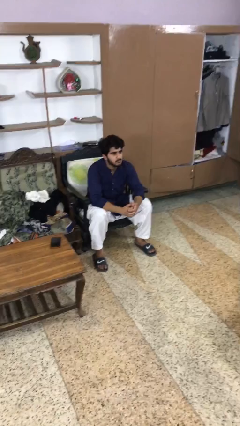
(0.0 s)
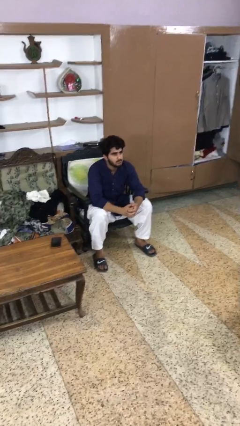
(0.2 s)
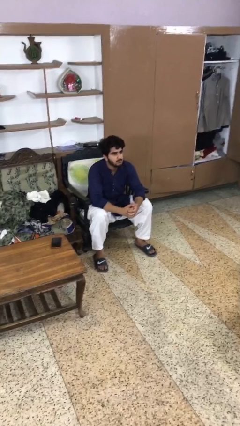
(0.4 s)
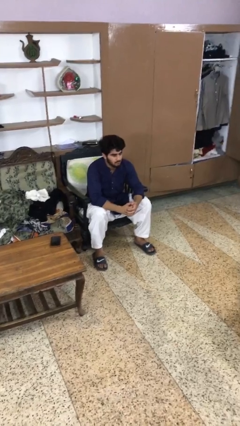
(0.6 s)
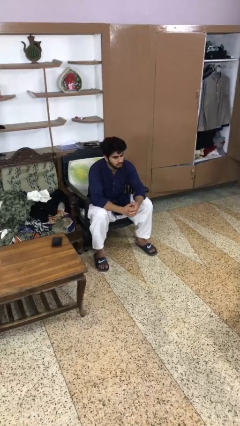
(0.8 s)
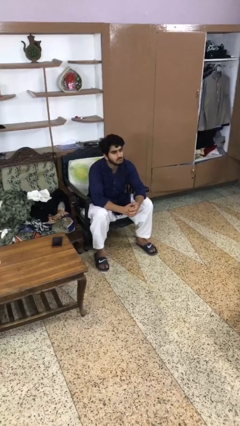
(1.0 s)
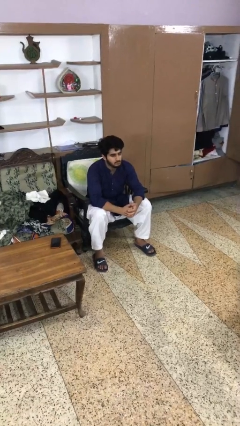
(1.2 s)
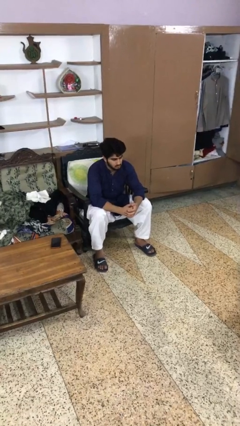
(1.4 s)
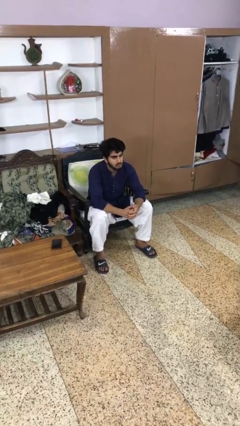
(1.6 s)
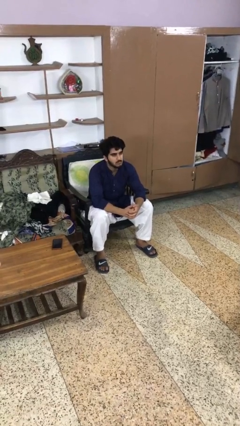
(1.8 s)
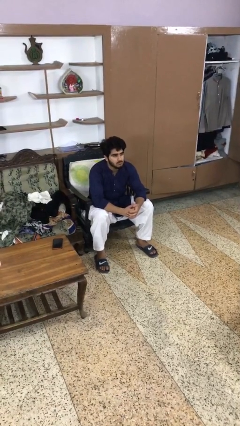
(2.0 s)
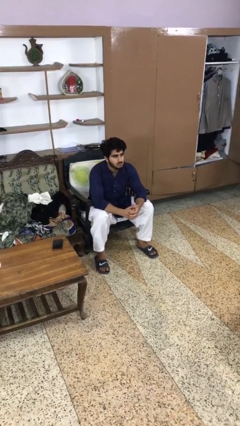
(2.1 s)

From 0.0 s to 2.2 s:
person nods head

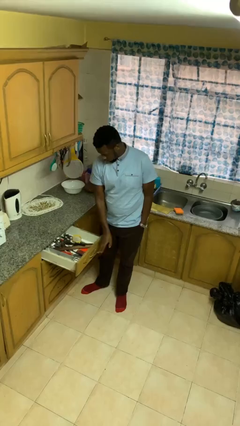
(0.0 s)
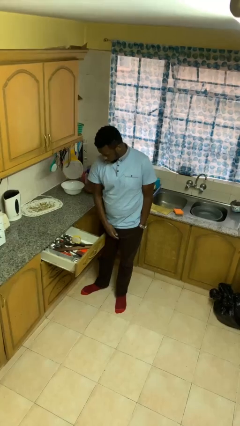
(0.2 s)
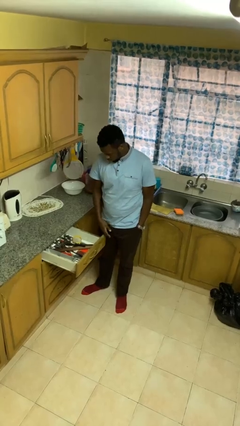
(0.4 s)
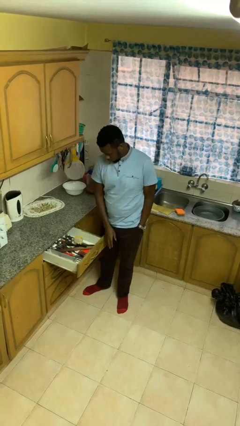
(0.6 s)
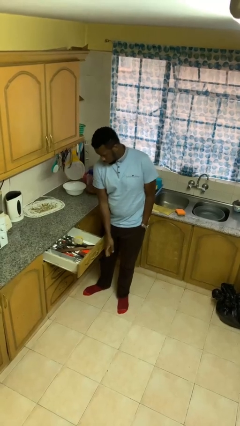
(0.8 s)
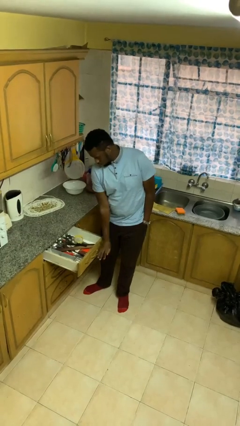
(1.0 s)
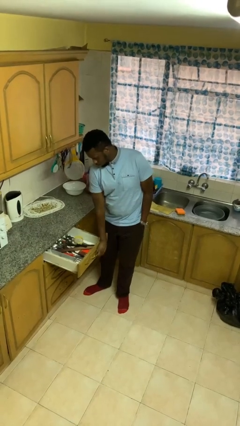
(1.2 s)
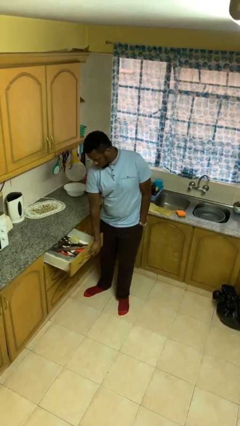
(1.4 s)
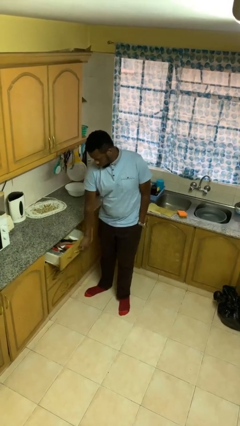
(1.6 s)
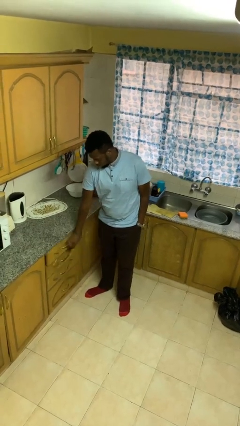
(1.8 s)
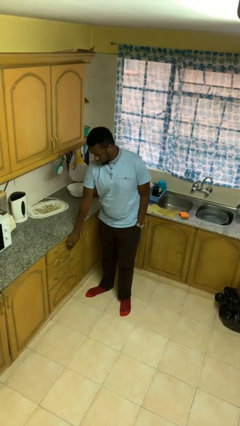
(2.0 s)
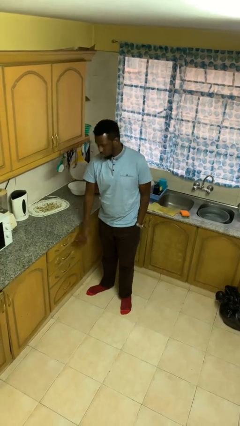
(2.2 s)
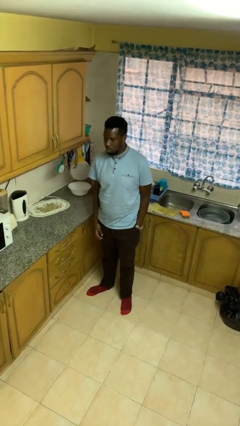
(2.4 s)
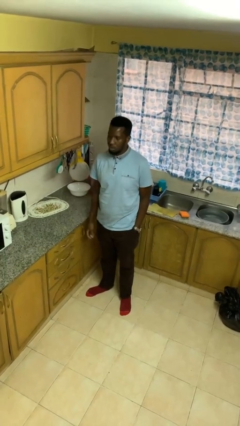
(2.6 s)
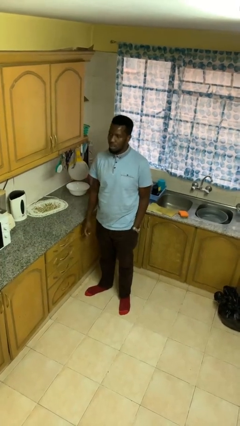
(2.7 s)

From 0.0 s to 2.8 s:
person closes kitchen drawer

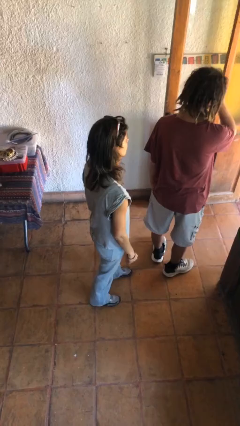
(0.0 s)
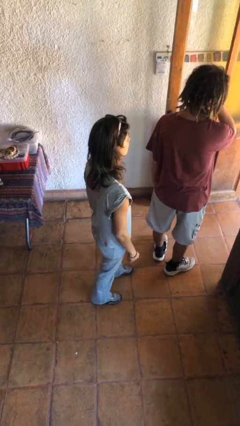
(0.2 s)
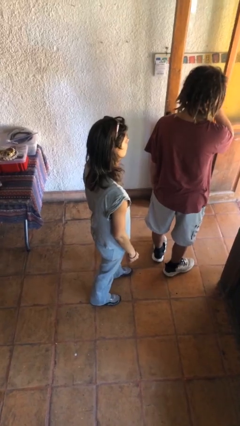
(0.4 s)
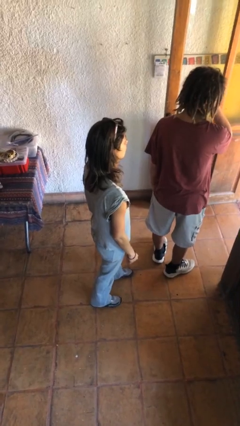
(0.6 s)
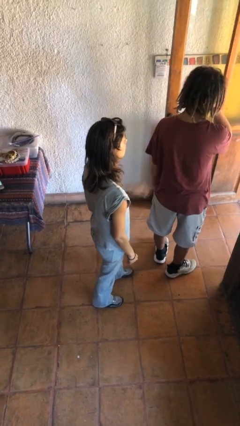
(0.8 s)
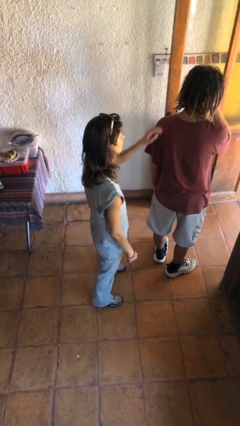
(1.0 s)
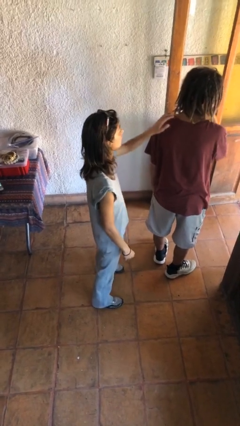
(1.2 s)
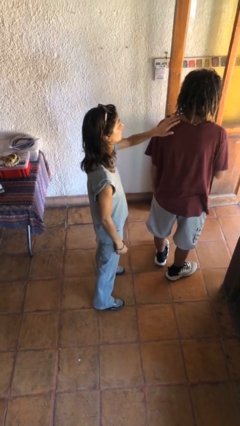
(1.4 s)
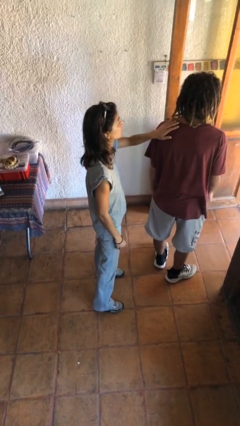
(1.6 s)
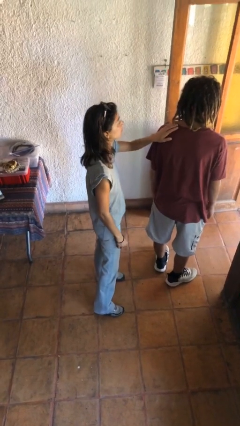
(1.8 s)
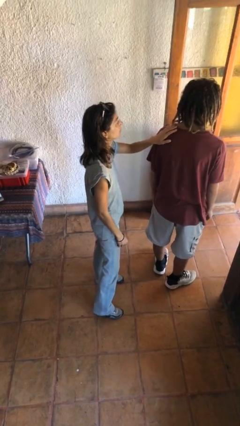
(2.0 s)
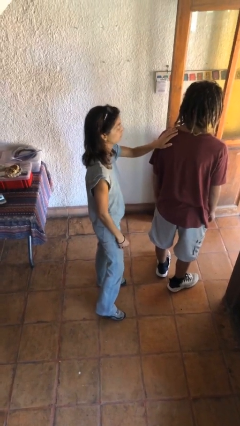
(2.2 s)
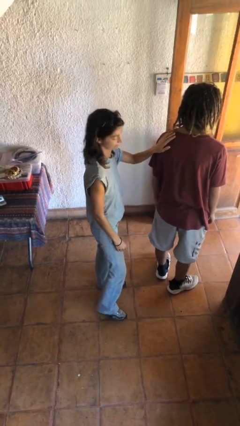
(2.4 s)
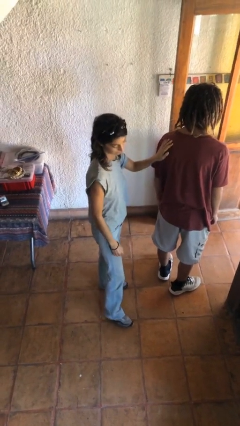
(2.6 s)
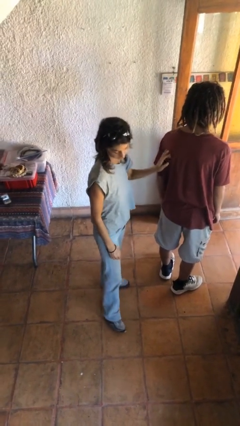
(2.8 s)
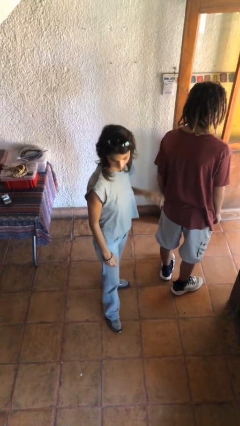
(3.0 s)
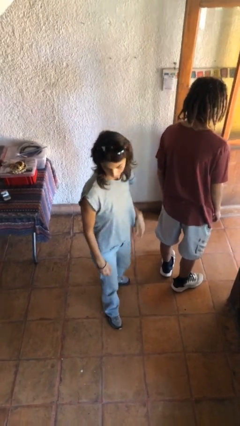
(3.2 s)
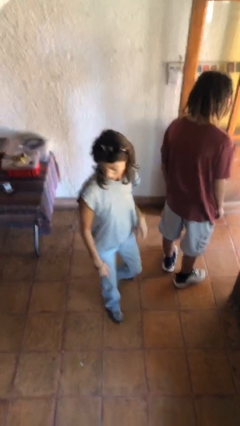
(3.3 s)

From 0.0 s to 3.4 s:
person touches back of person

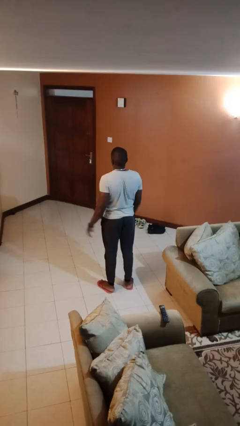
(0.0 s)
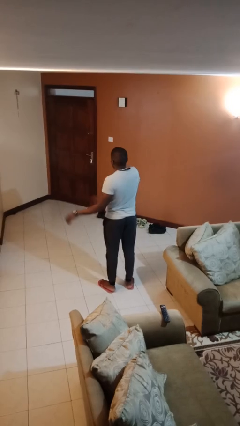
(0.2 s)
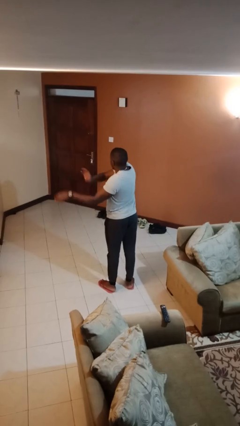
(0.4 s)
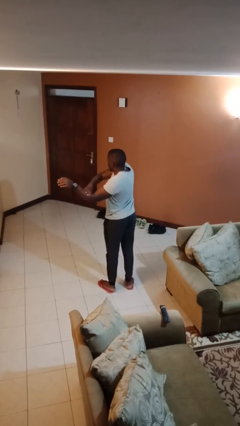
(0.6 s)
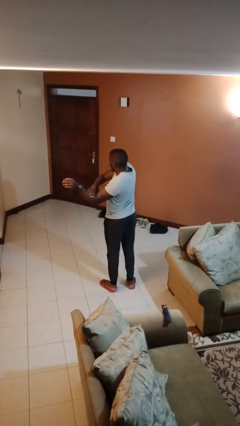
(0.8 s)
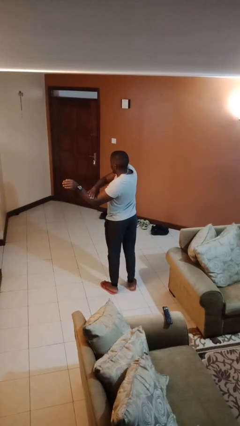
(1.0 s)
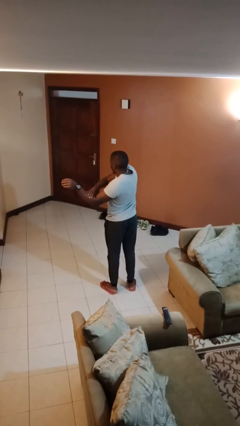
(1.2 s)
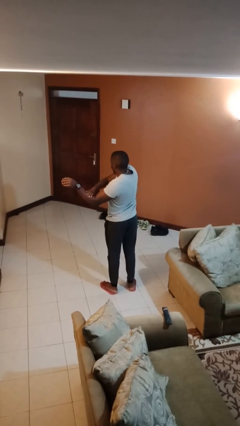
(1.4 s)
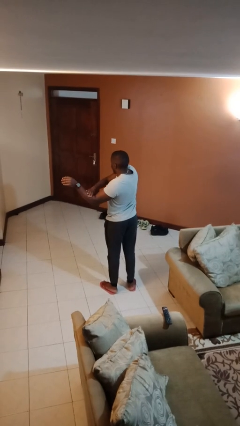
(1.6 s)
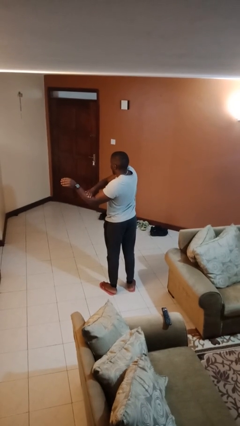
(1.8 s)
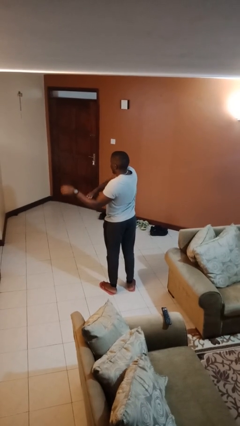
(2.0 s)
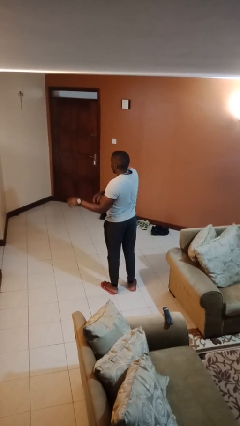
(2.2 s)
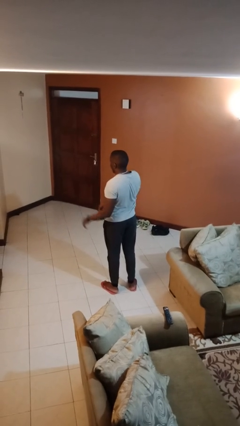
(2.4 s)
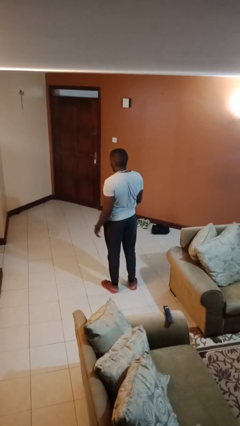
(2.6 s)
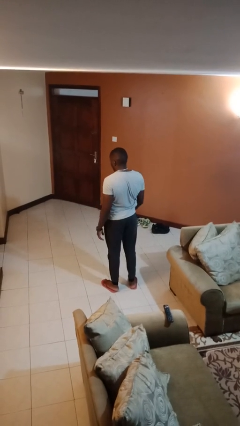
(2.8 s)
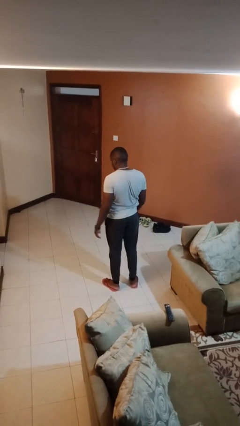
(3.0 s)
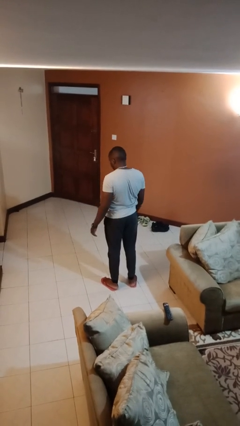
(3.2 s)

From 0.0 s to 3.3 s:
person swats bug

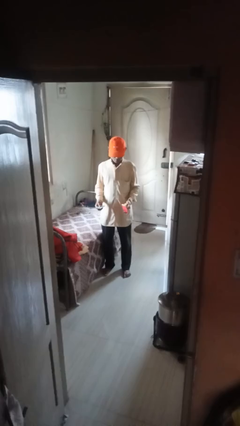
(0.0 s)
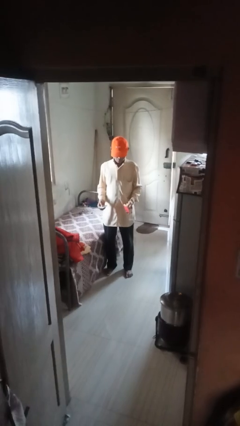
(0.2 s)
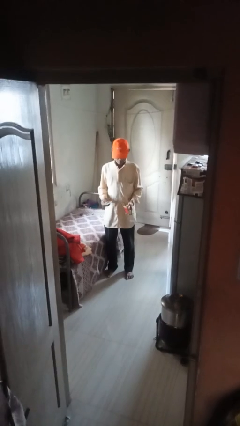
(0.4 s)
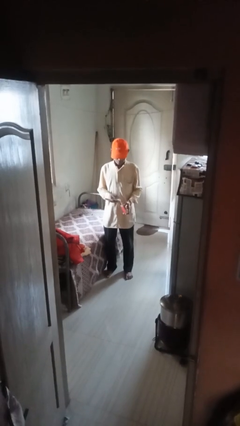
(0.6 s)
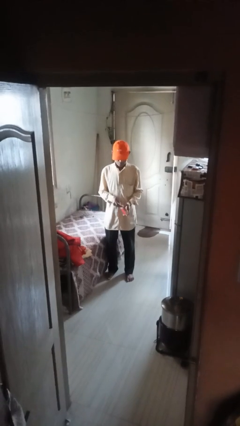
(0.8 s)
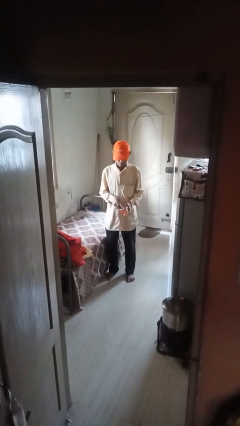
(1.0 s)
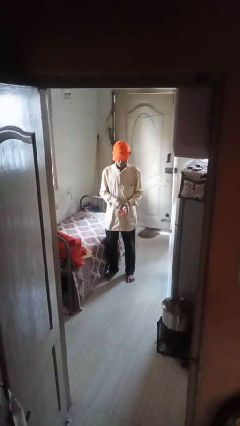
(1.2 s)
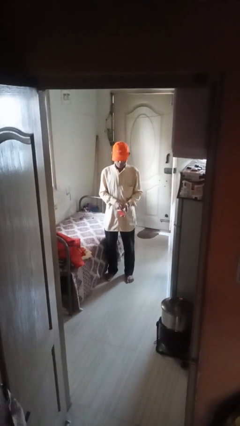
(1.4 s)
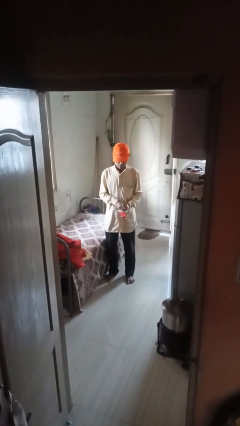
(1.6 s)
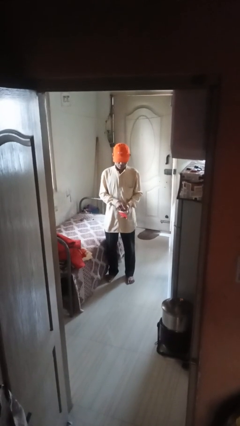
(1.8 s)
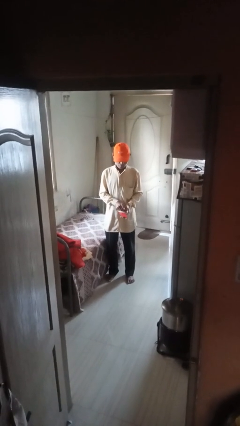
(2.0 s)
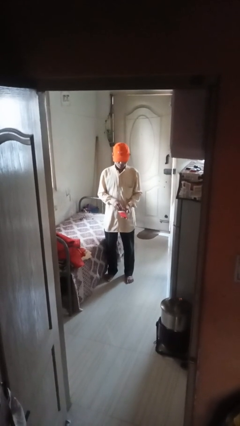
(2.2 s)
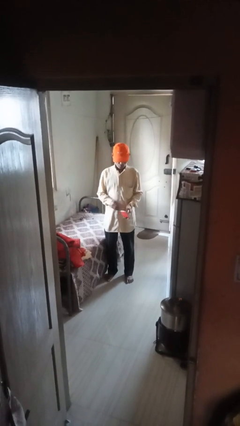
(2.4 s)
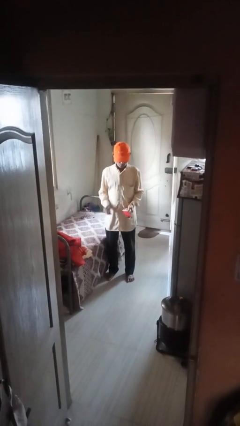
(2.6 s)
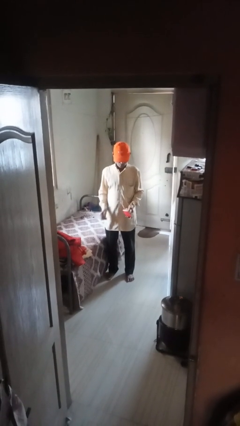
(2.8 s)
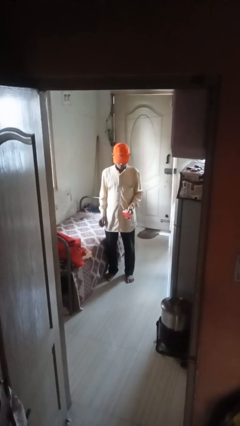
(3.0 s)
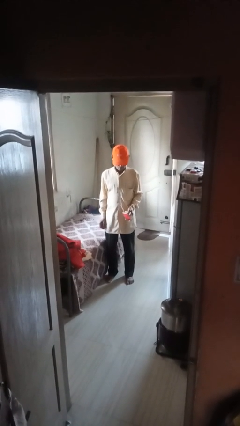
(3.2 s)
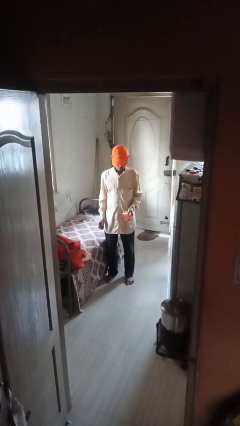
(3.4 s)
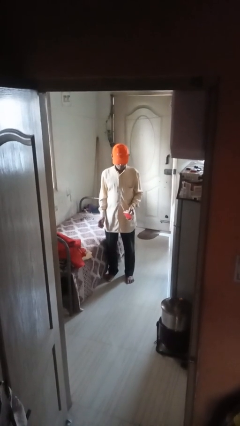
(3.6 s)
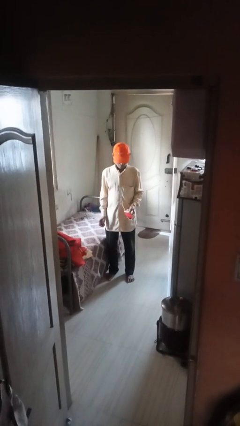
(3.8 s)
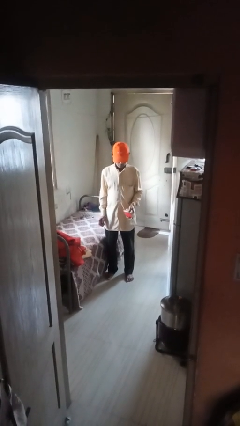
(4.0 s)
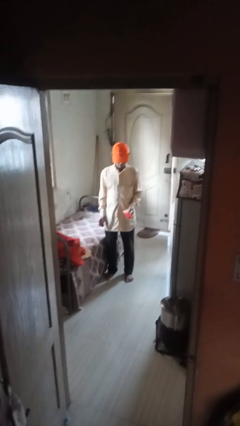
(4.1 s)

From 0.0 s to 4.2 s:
person puts object into purse

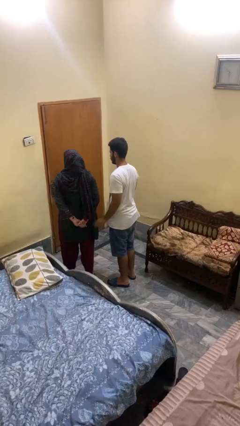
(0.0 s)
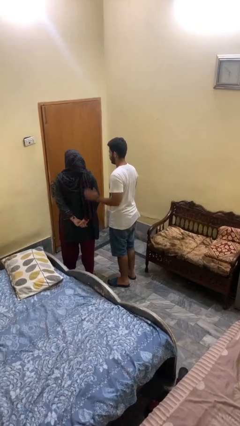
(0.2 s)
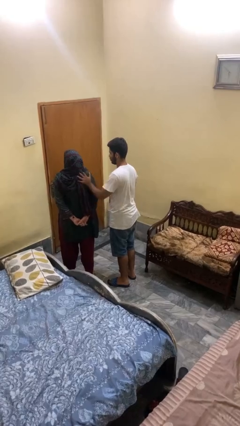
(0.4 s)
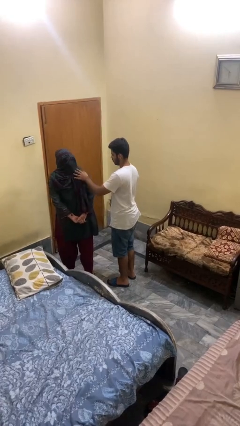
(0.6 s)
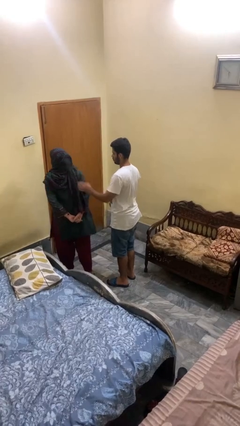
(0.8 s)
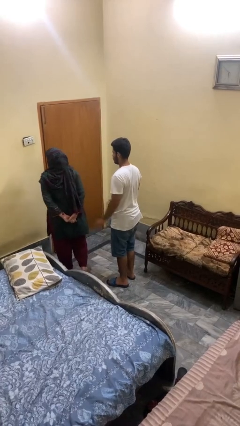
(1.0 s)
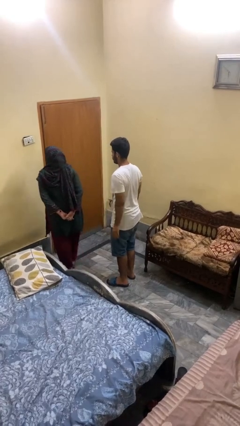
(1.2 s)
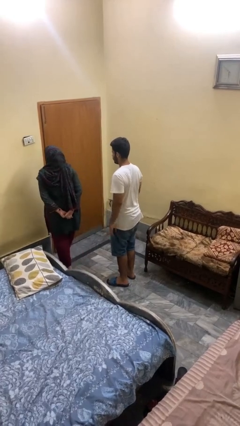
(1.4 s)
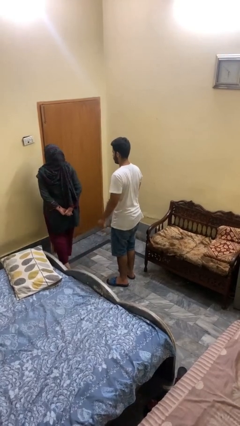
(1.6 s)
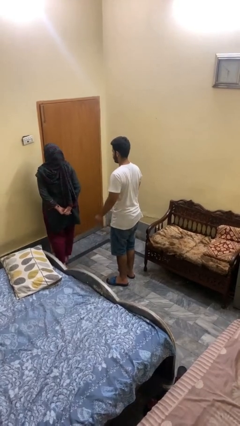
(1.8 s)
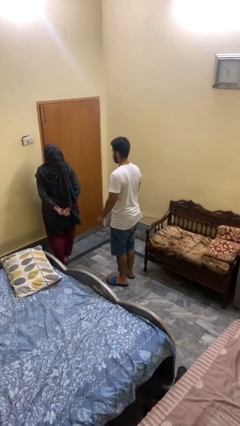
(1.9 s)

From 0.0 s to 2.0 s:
person shoves person
